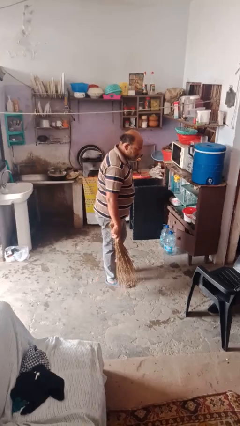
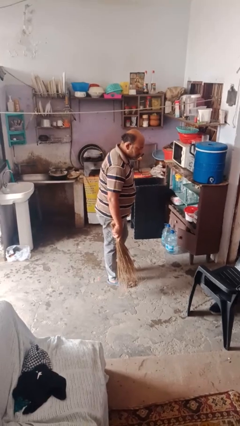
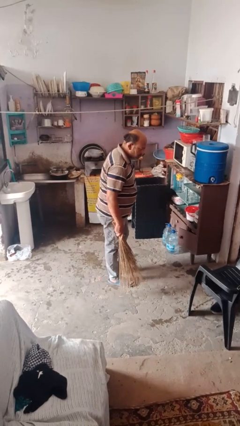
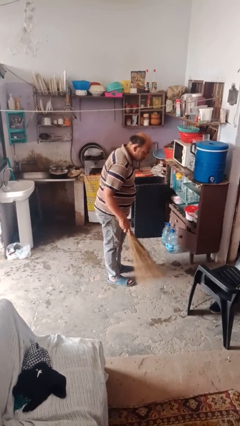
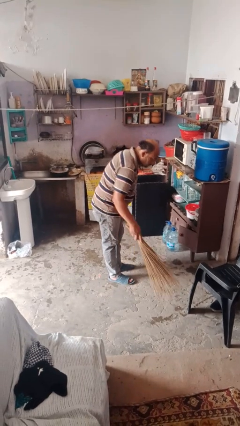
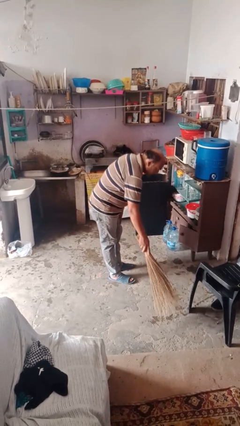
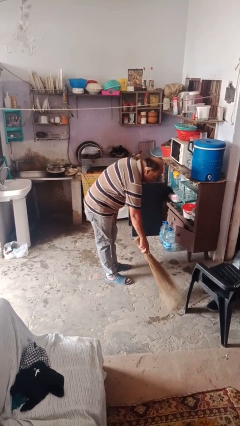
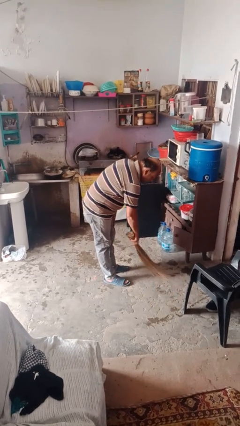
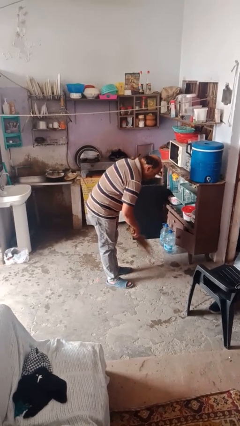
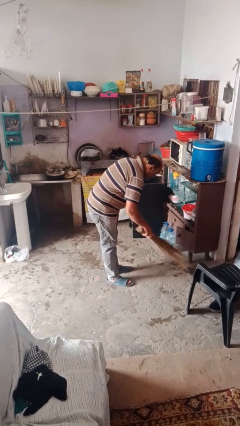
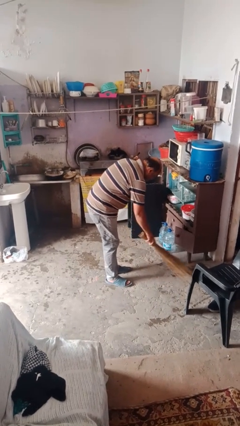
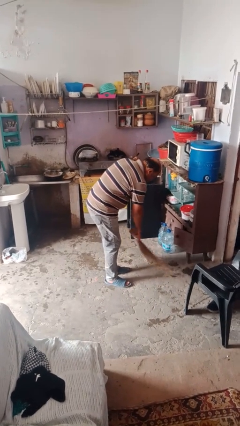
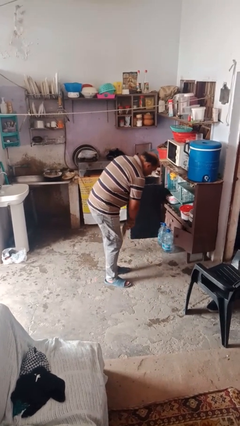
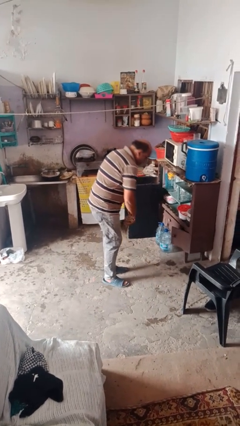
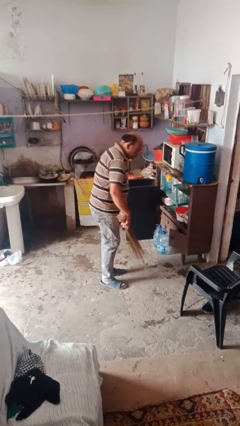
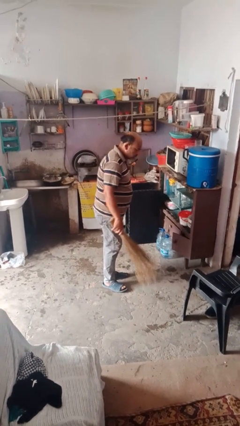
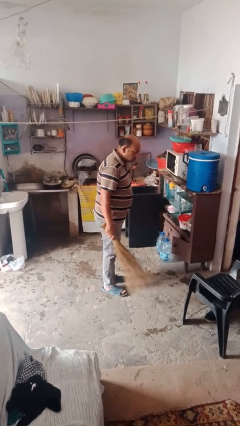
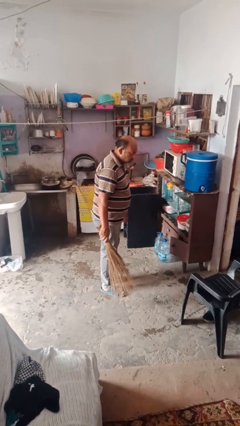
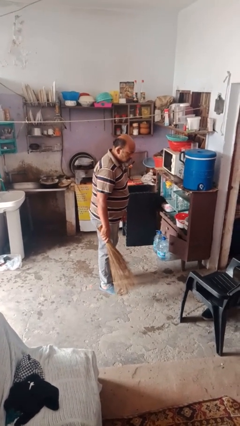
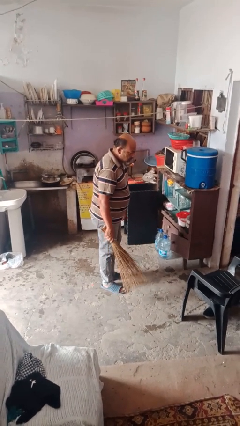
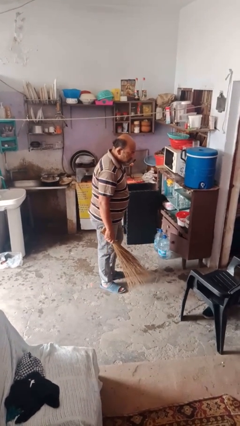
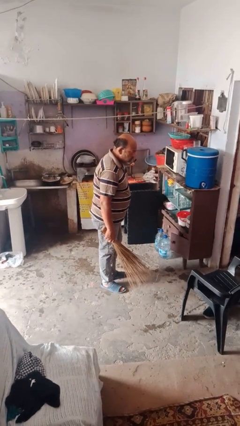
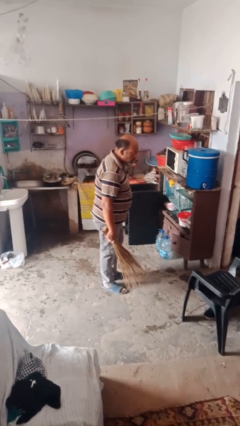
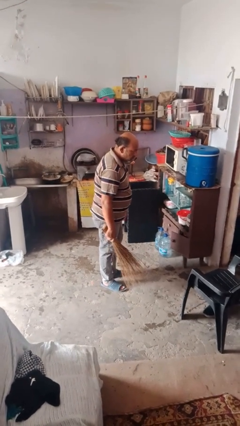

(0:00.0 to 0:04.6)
person sweeps floor

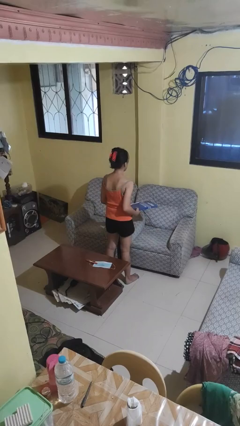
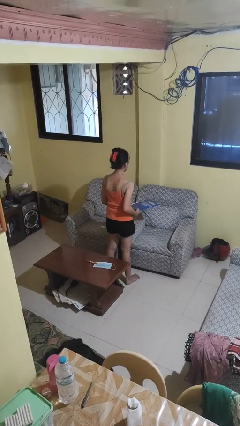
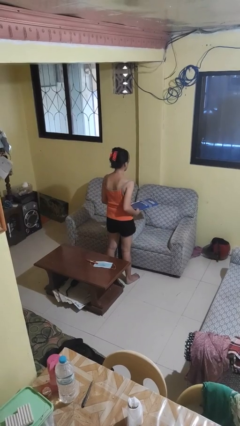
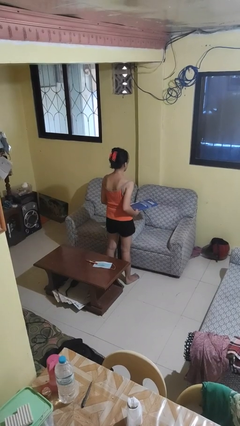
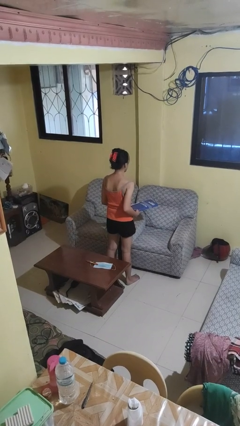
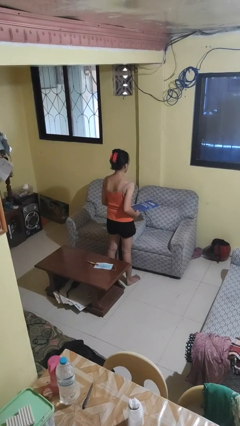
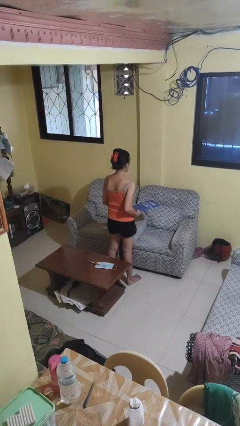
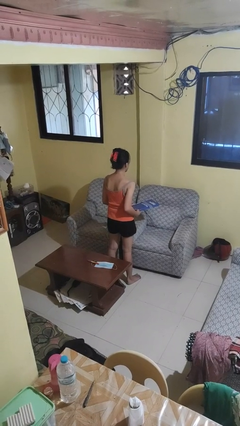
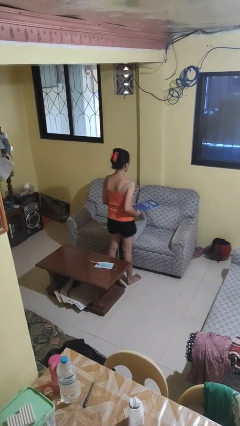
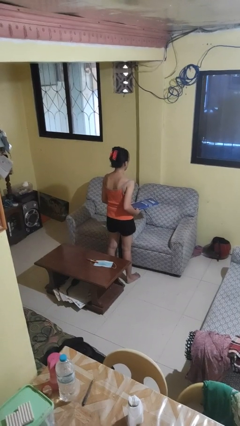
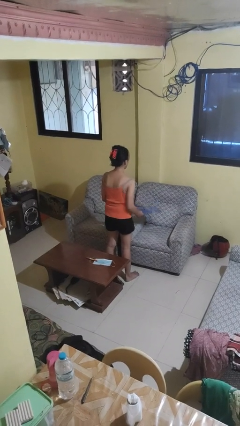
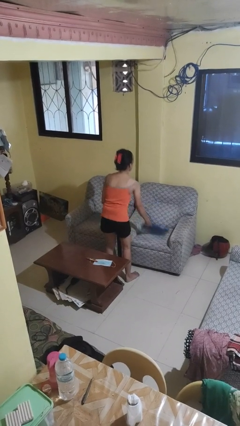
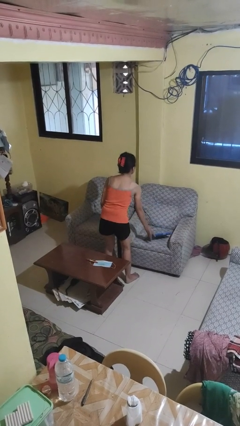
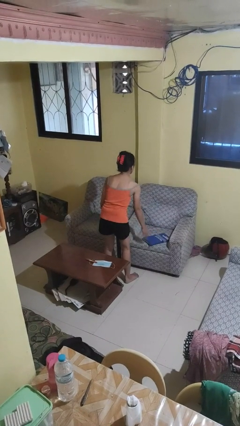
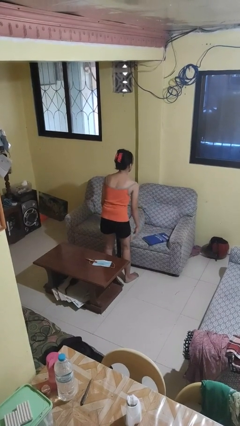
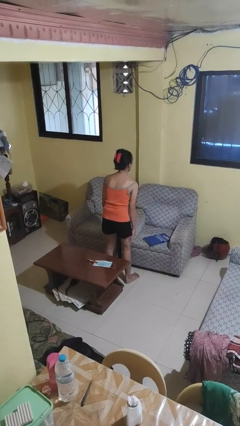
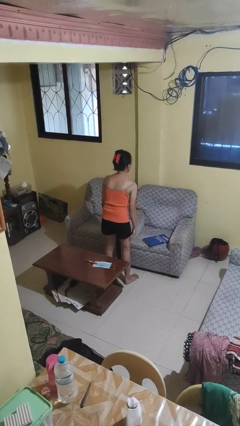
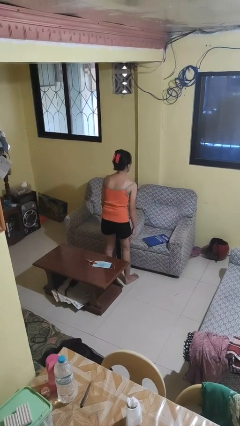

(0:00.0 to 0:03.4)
person puts down object on couch

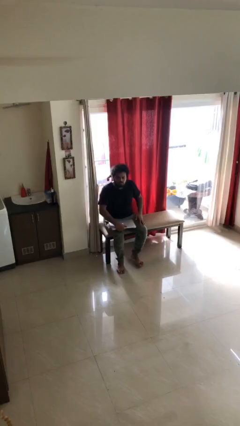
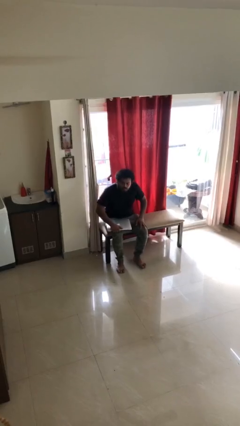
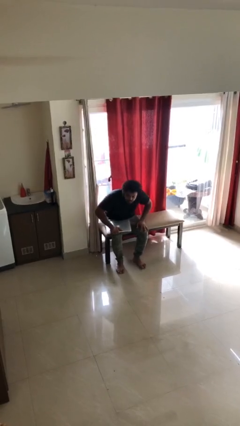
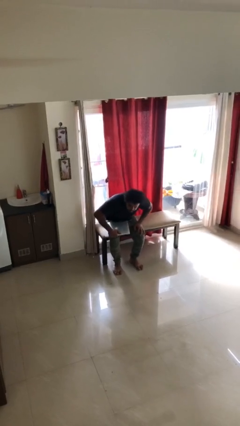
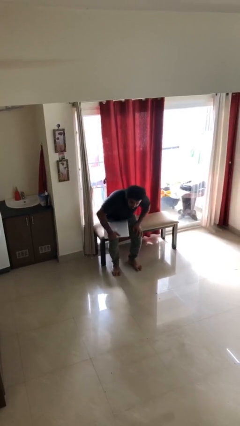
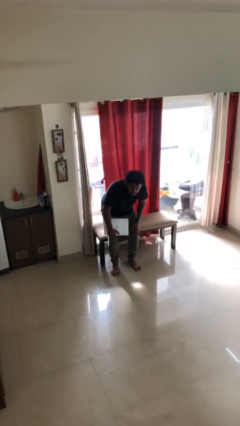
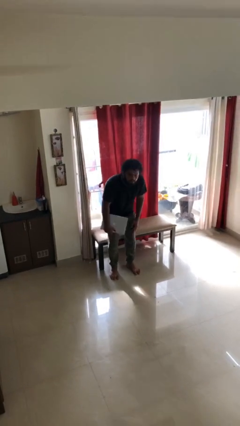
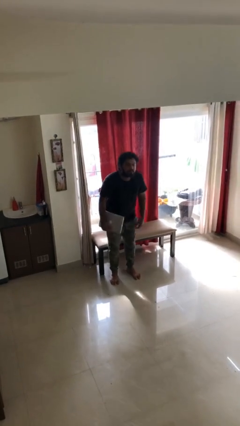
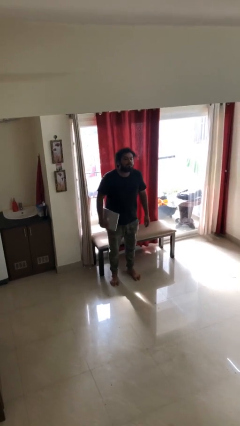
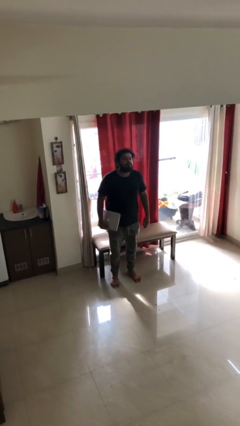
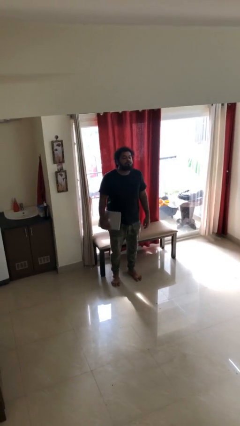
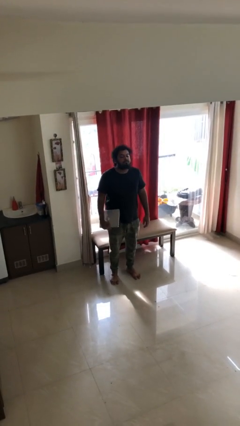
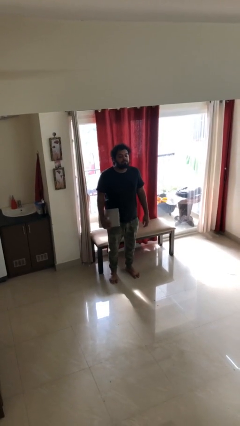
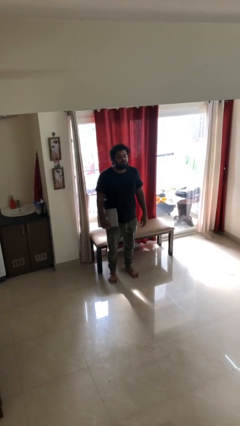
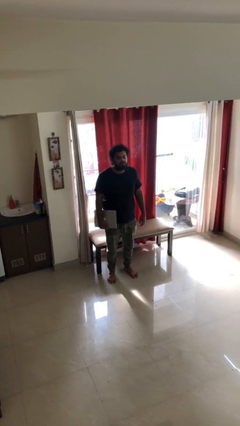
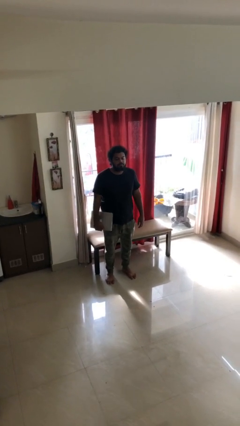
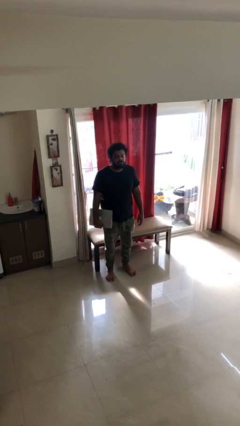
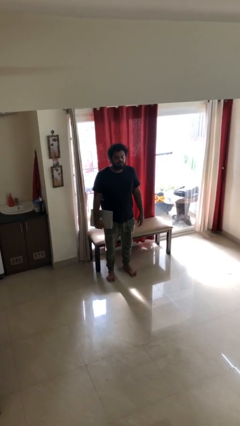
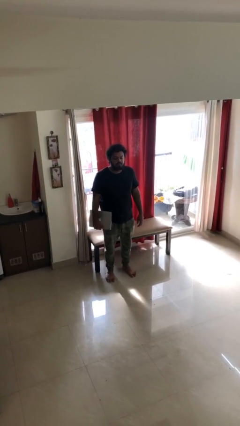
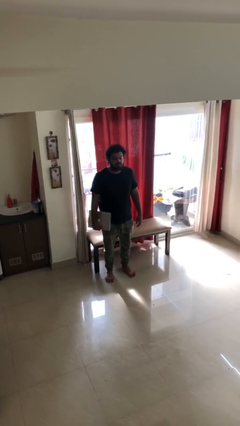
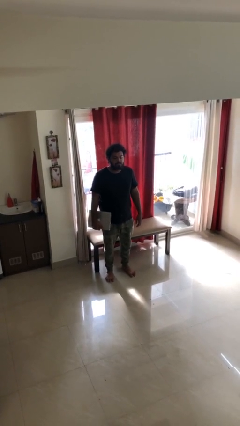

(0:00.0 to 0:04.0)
person stands up

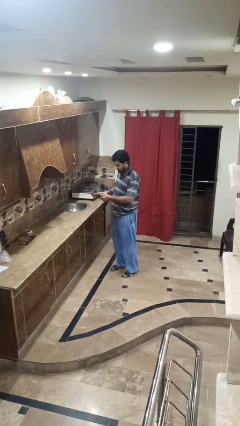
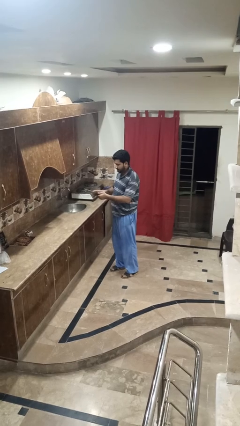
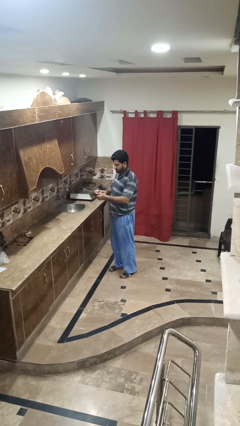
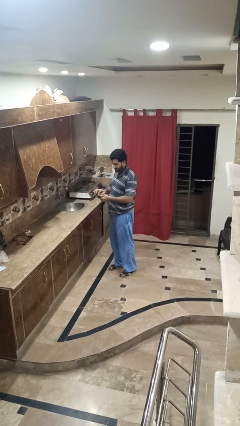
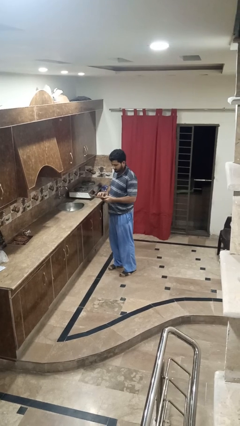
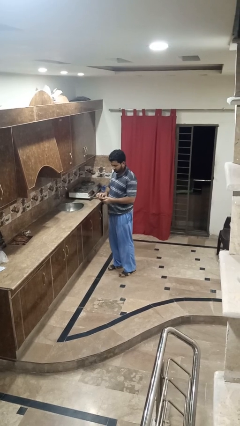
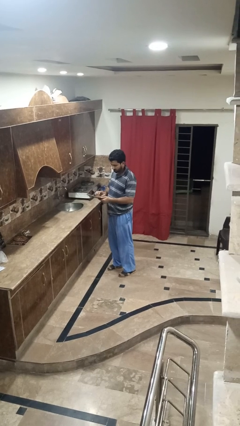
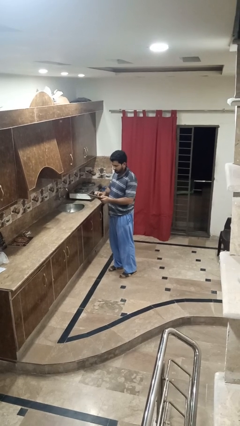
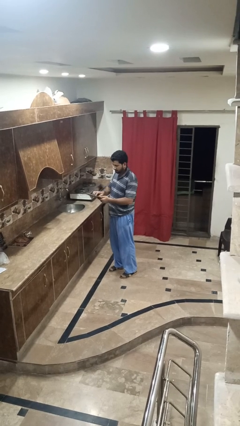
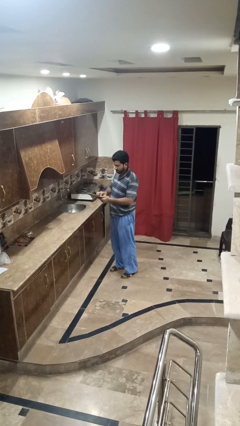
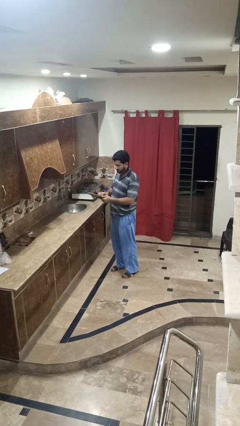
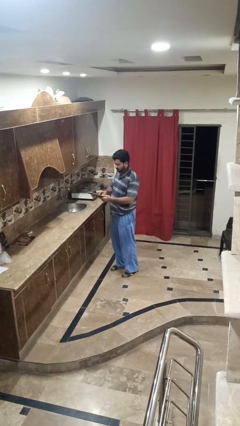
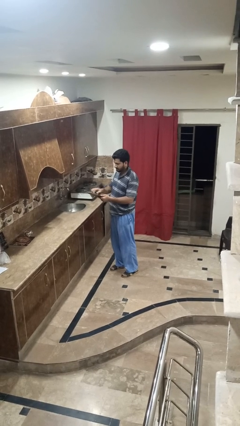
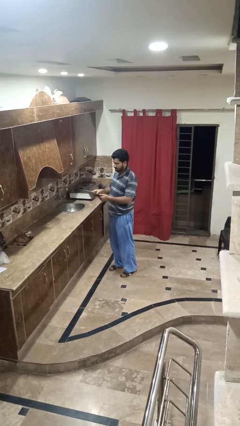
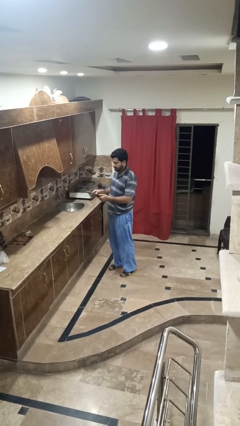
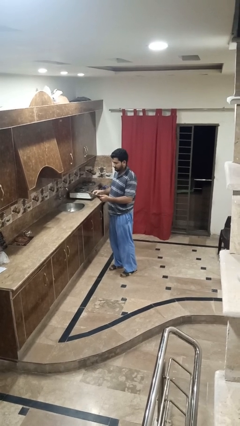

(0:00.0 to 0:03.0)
person interacts with tablet

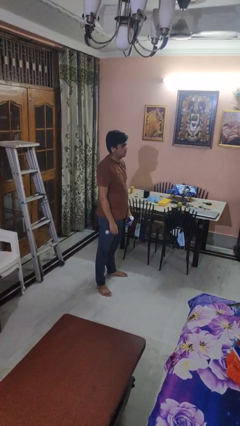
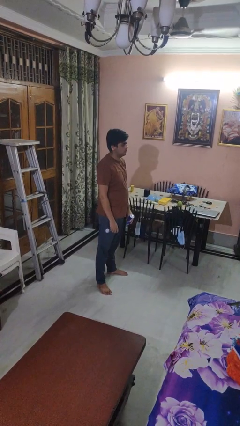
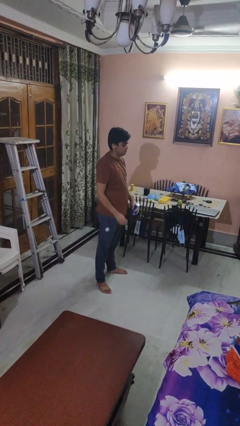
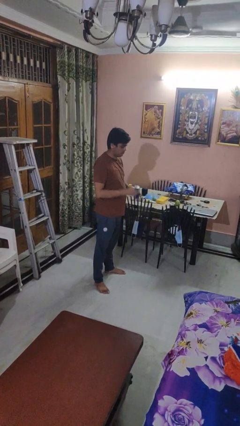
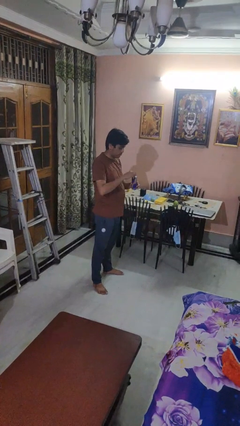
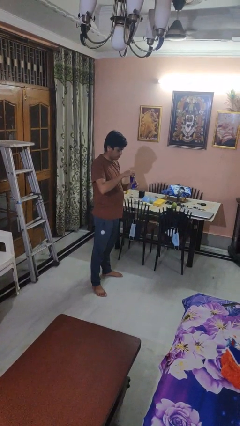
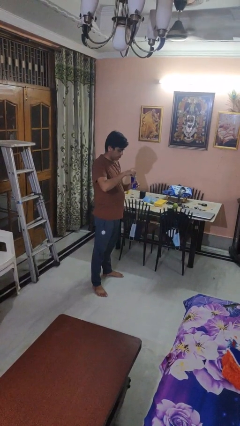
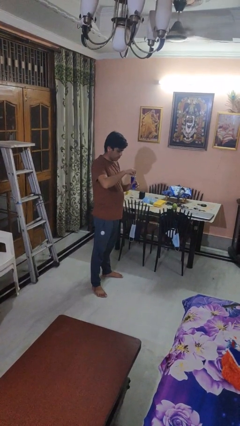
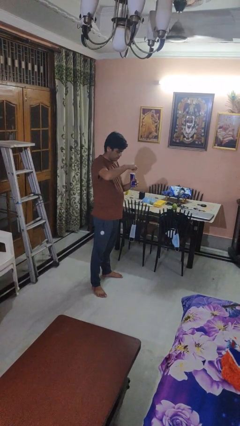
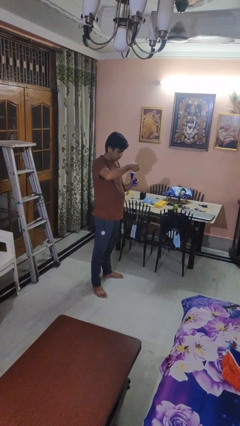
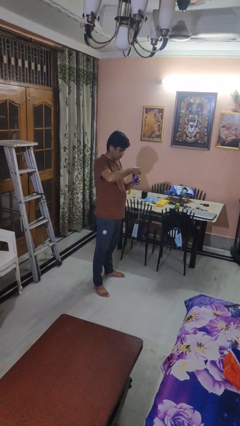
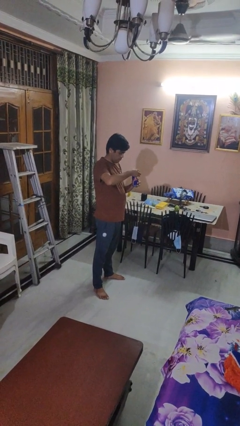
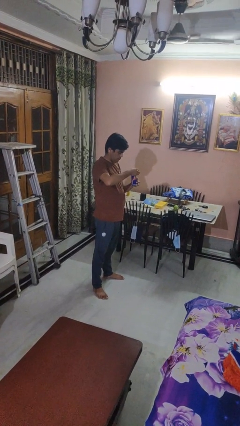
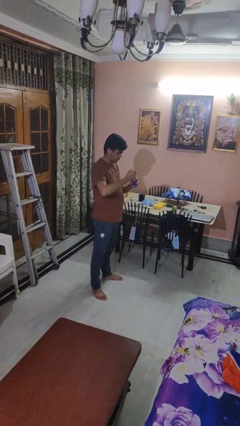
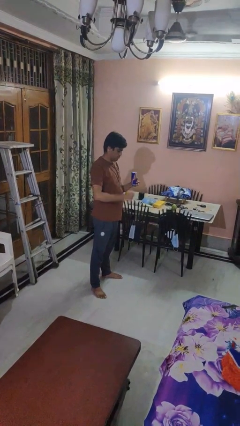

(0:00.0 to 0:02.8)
person opens beverage can

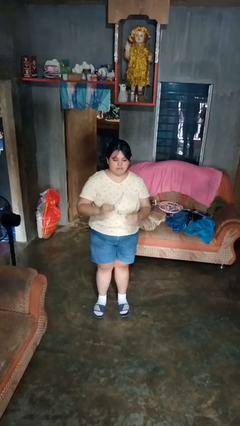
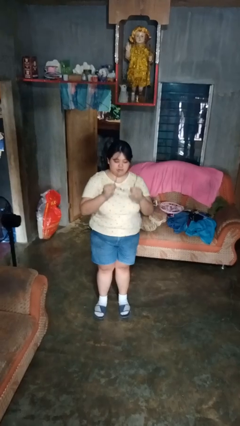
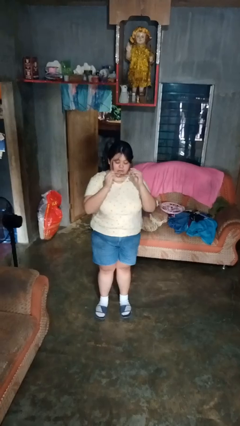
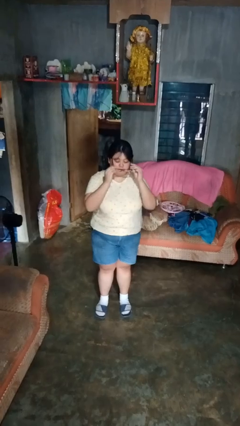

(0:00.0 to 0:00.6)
person puts on glasses
